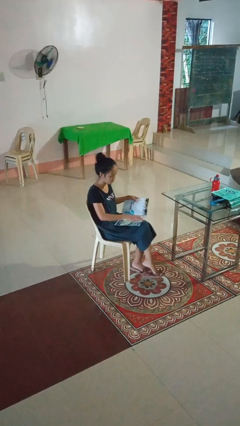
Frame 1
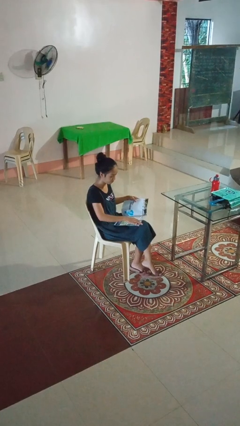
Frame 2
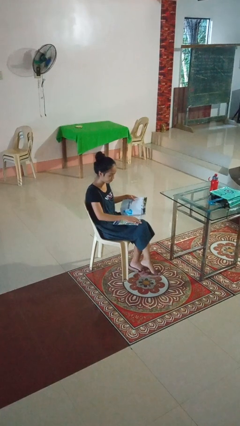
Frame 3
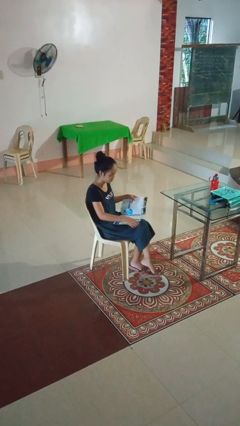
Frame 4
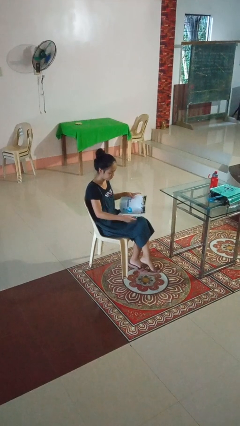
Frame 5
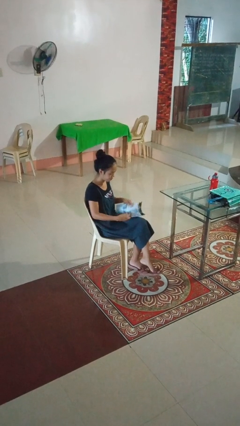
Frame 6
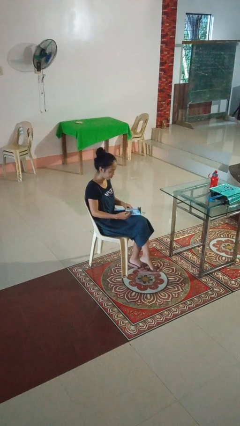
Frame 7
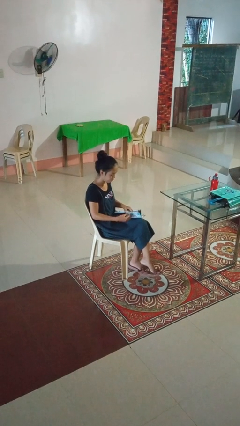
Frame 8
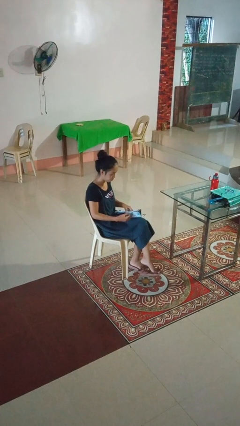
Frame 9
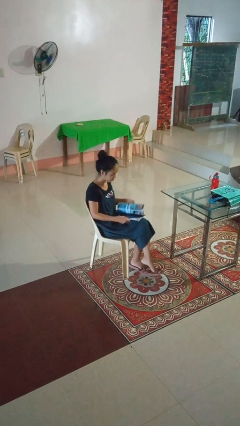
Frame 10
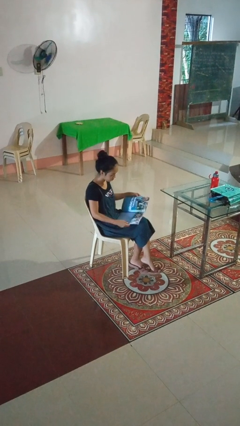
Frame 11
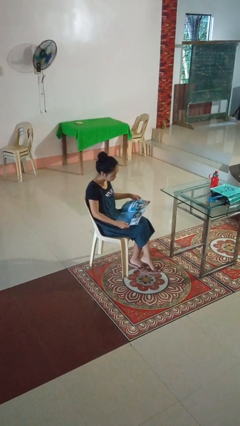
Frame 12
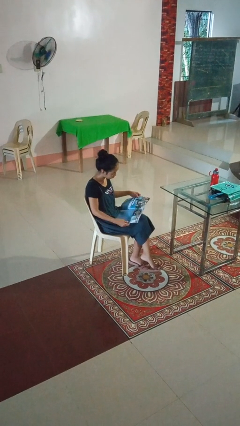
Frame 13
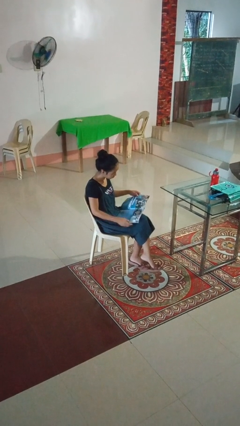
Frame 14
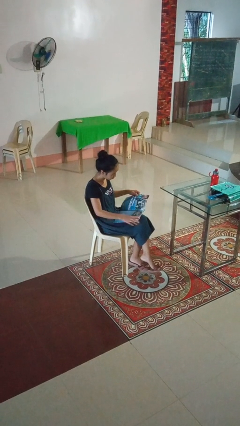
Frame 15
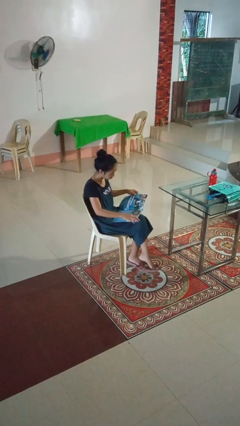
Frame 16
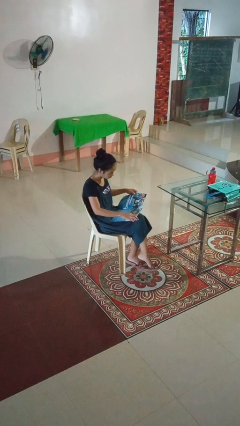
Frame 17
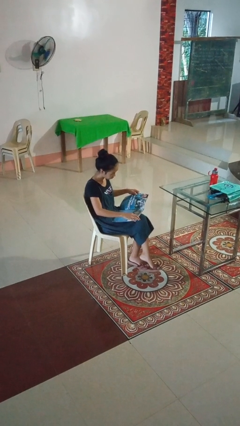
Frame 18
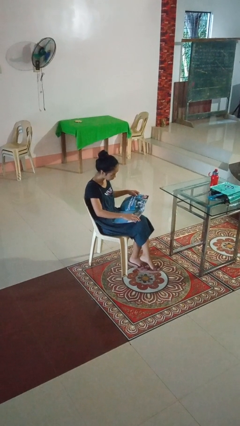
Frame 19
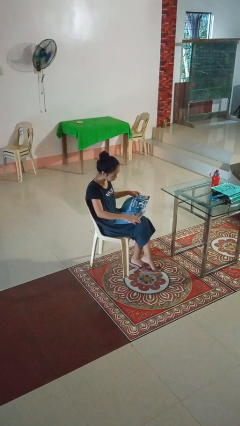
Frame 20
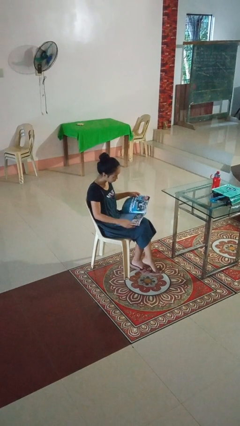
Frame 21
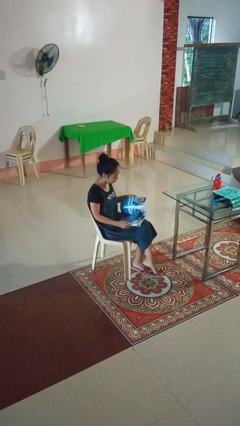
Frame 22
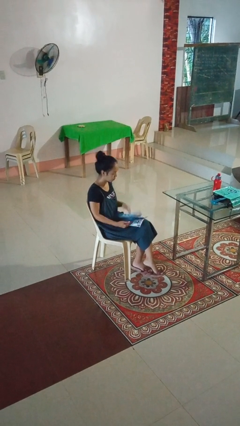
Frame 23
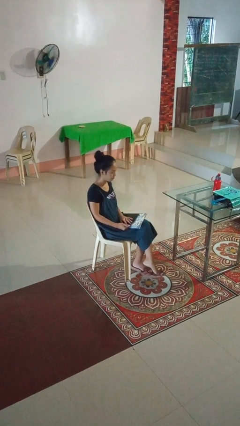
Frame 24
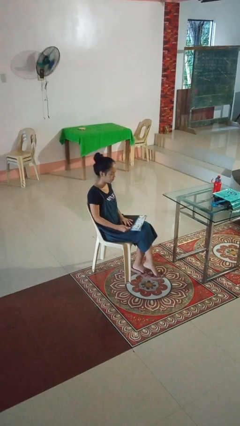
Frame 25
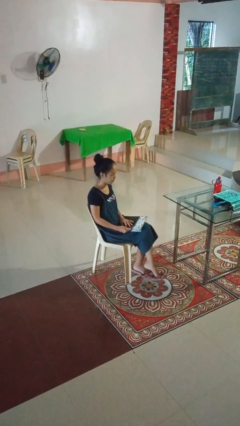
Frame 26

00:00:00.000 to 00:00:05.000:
person reads magazine

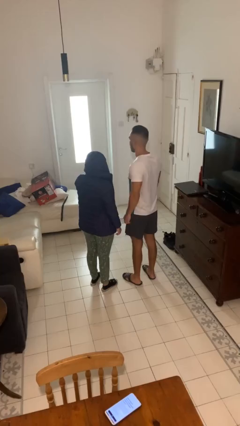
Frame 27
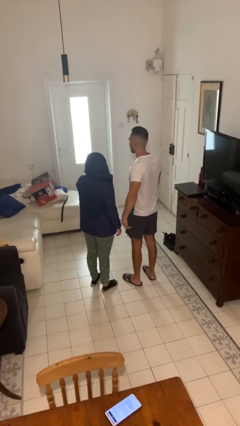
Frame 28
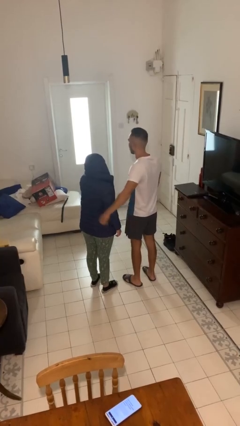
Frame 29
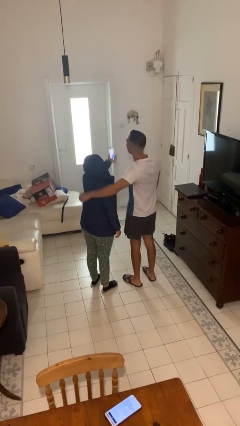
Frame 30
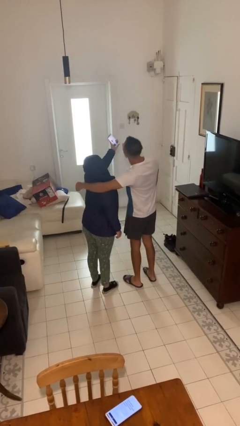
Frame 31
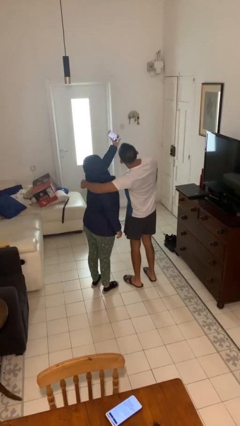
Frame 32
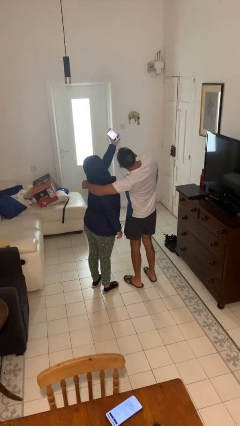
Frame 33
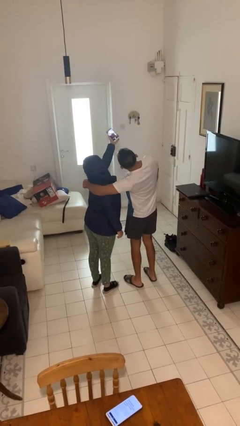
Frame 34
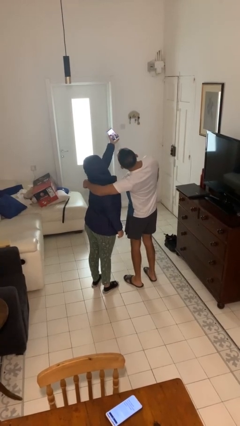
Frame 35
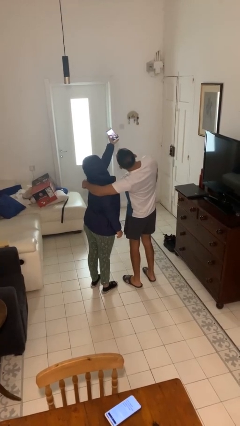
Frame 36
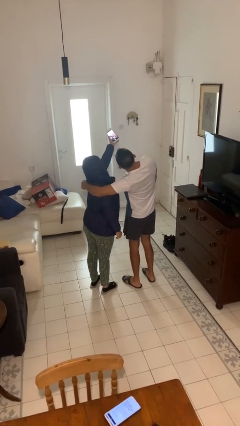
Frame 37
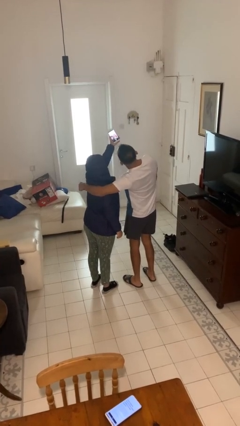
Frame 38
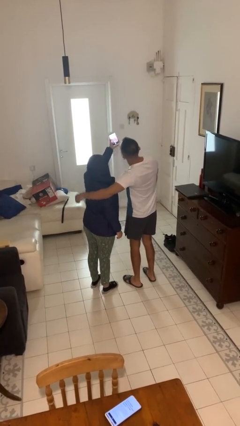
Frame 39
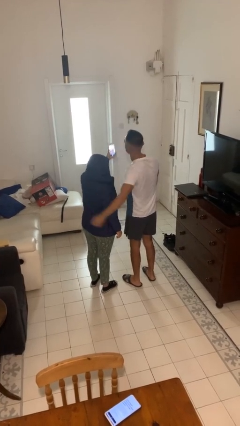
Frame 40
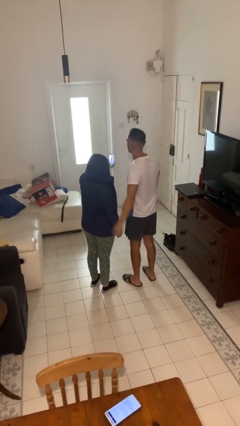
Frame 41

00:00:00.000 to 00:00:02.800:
person takes selfie with person

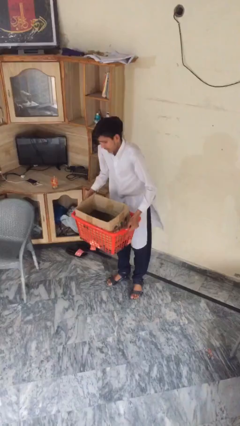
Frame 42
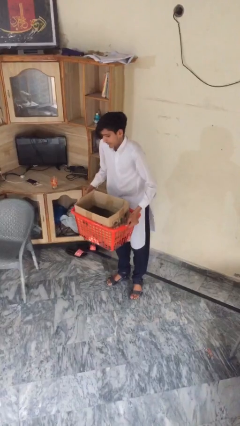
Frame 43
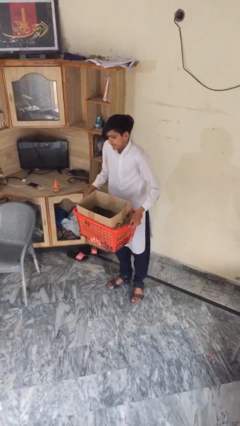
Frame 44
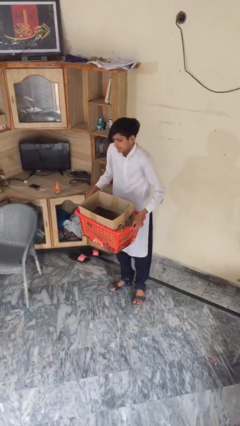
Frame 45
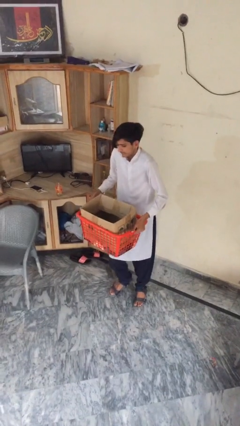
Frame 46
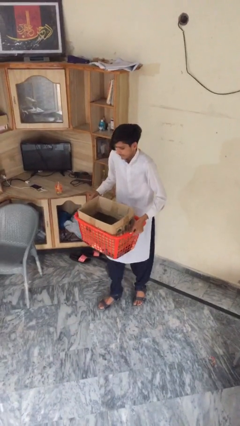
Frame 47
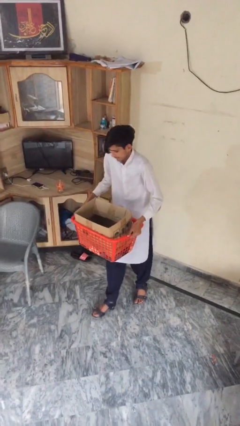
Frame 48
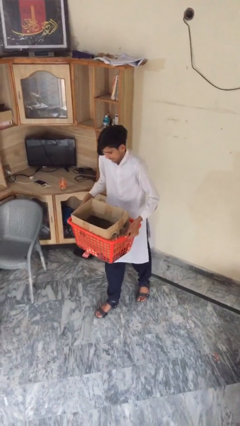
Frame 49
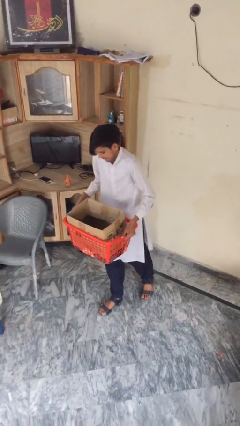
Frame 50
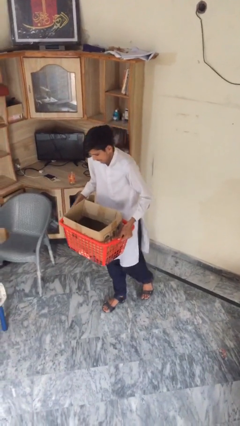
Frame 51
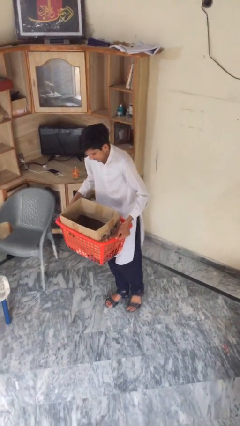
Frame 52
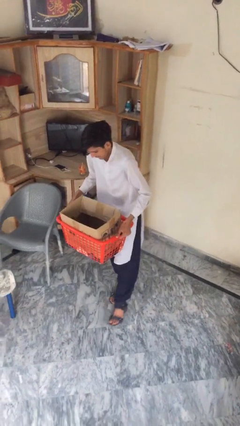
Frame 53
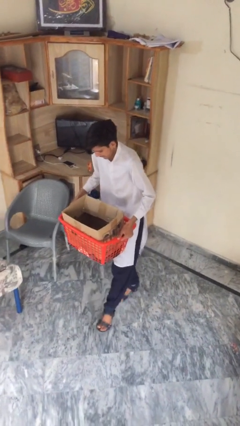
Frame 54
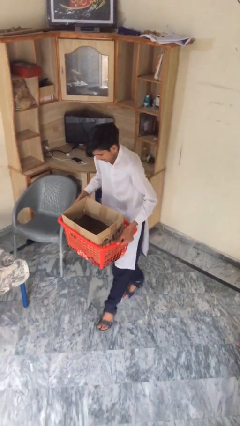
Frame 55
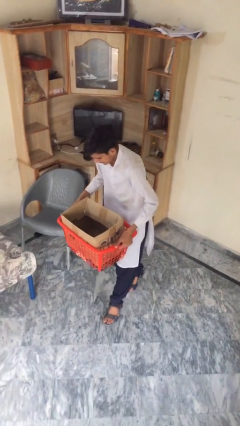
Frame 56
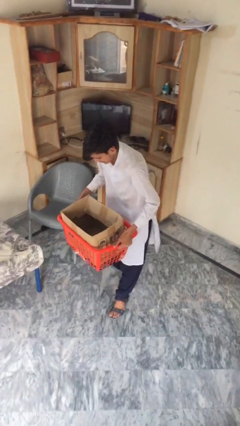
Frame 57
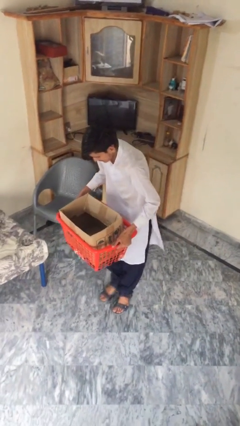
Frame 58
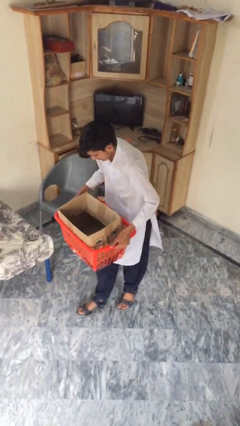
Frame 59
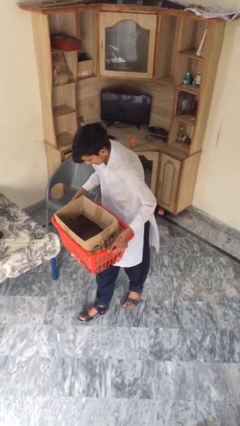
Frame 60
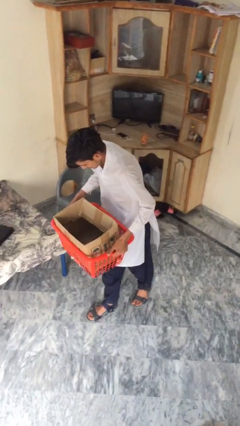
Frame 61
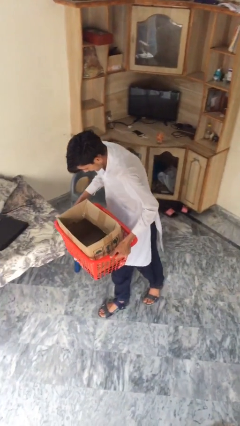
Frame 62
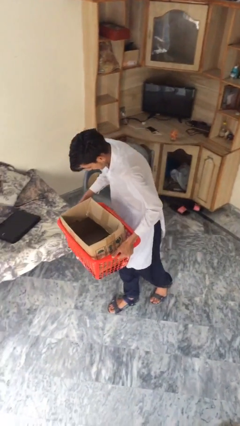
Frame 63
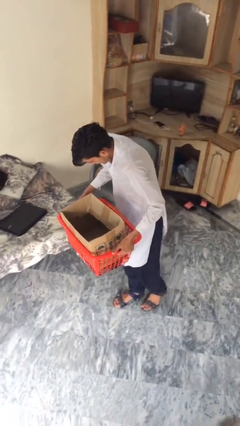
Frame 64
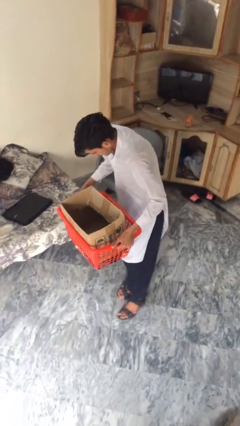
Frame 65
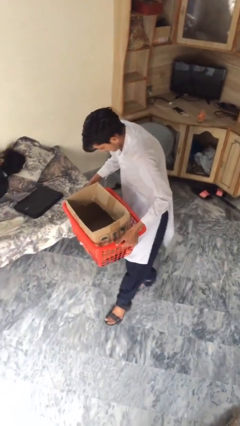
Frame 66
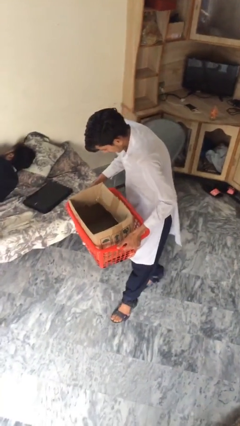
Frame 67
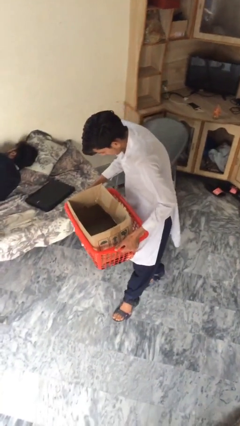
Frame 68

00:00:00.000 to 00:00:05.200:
person carries heavy object

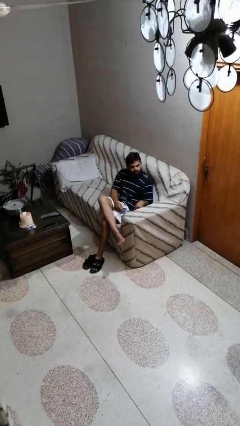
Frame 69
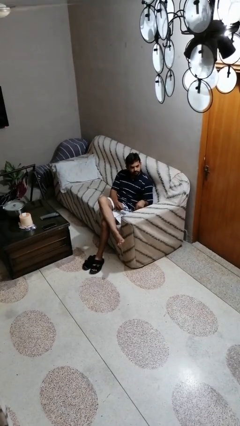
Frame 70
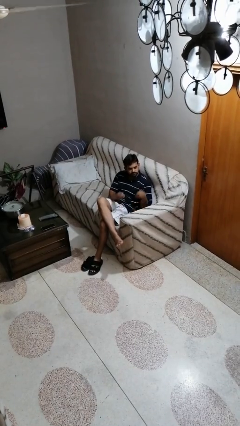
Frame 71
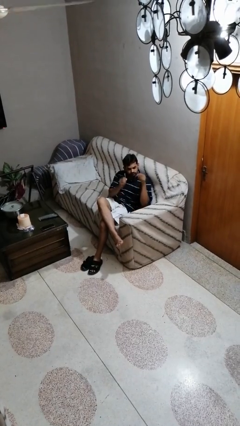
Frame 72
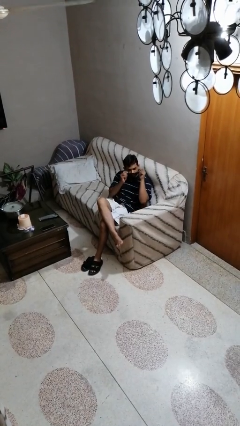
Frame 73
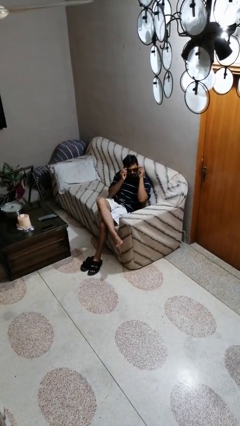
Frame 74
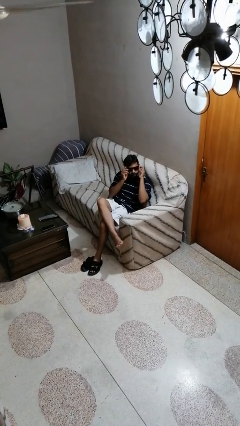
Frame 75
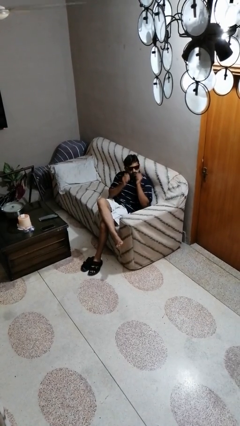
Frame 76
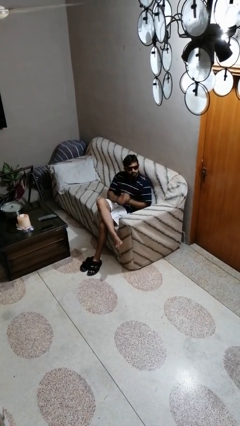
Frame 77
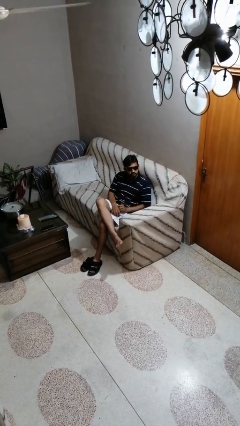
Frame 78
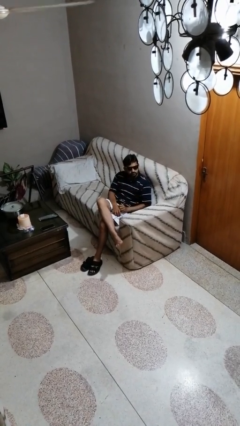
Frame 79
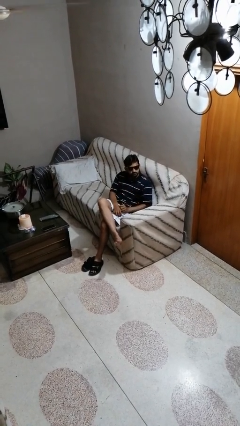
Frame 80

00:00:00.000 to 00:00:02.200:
person puts on sunglasses

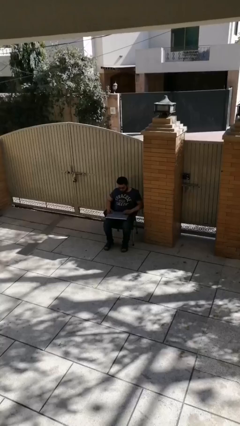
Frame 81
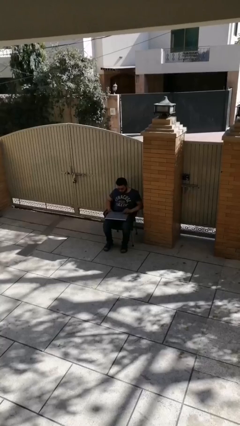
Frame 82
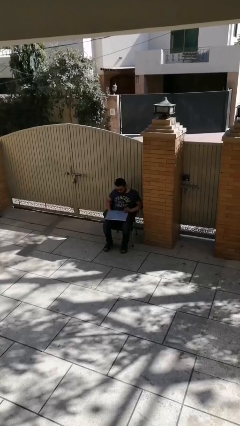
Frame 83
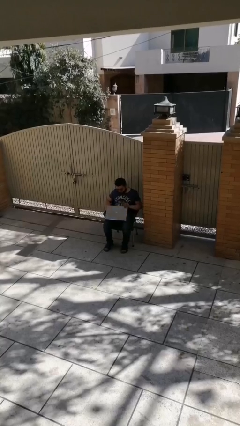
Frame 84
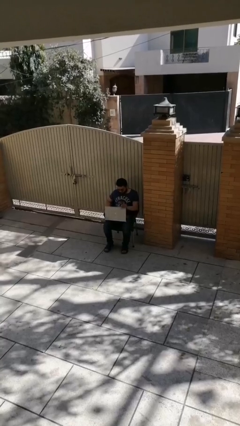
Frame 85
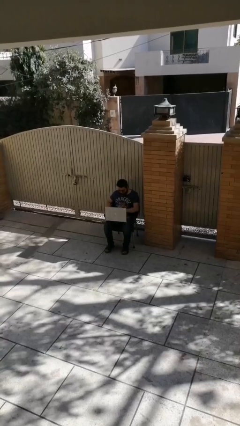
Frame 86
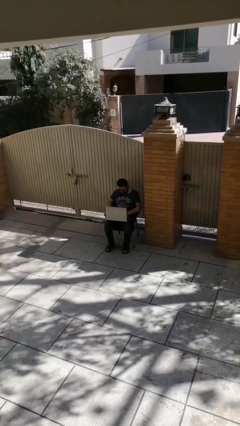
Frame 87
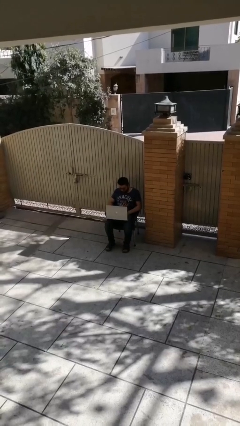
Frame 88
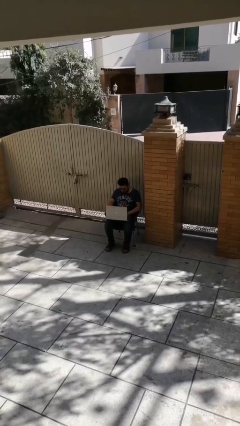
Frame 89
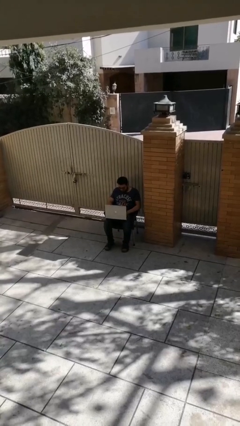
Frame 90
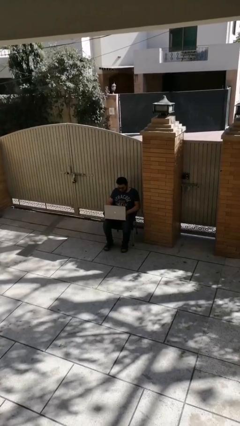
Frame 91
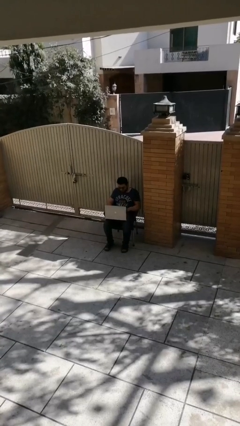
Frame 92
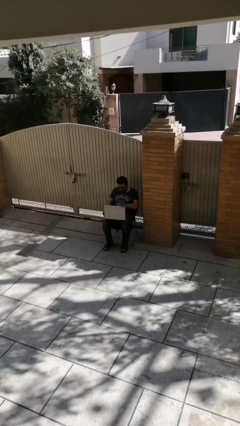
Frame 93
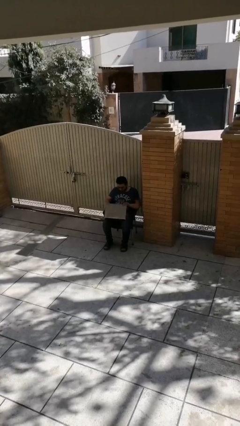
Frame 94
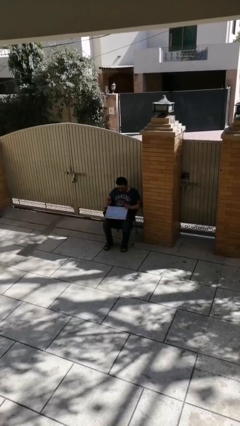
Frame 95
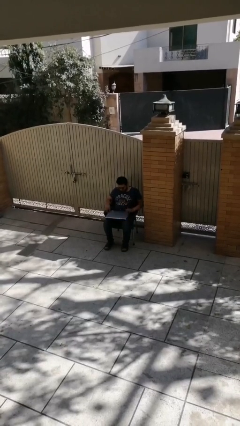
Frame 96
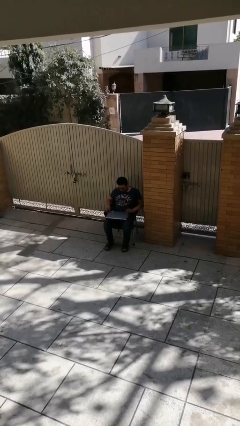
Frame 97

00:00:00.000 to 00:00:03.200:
person interacts with laptop
